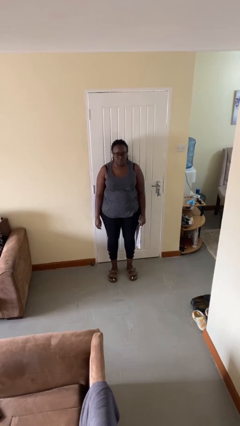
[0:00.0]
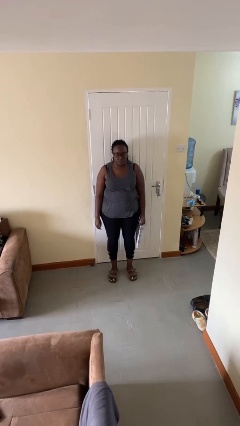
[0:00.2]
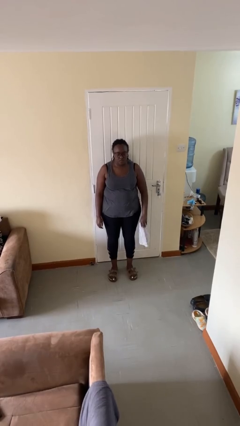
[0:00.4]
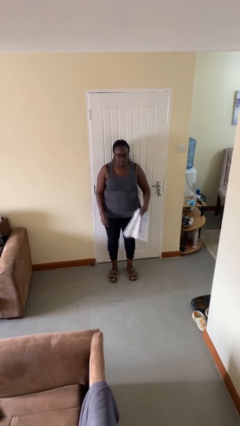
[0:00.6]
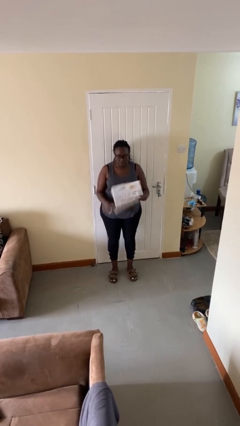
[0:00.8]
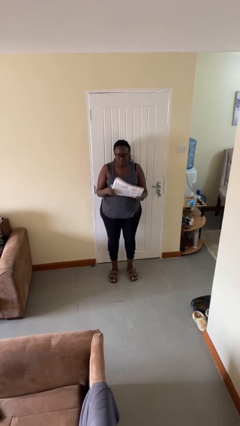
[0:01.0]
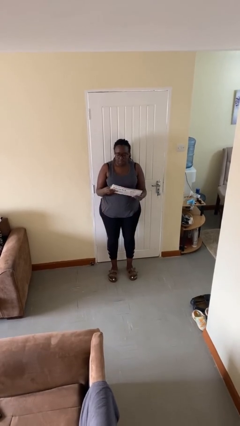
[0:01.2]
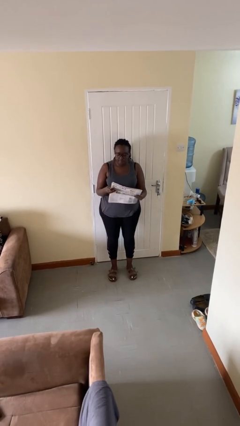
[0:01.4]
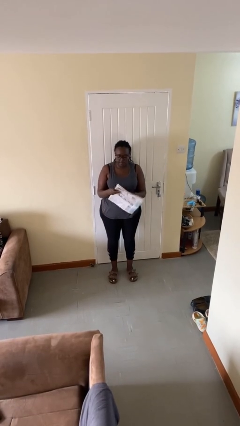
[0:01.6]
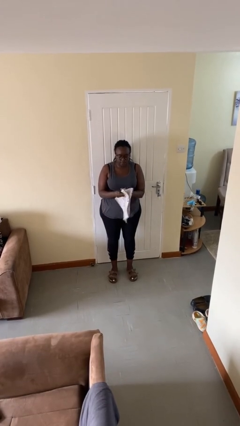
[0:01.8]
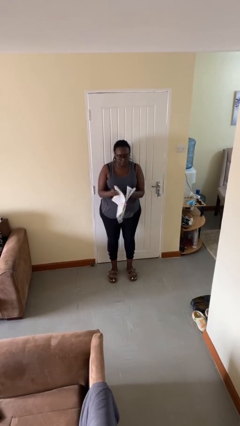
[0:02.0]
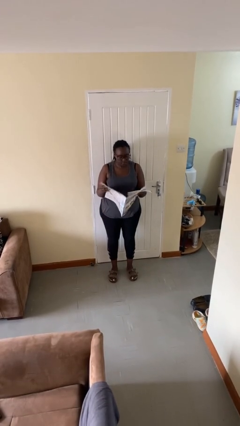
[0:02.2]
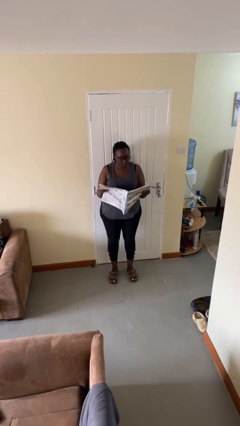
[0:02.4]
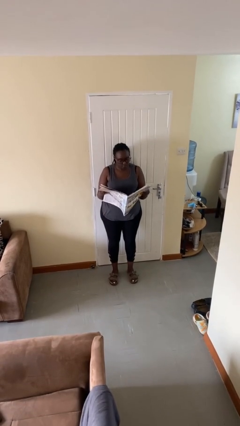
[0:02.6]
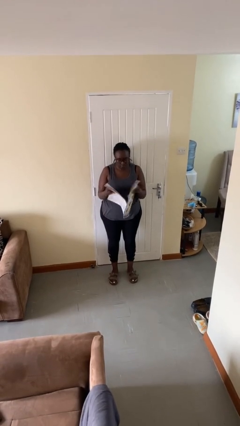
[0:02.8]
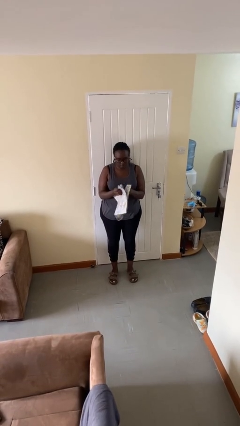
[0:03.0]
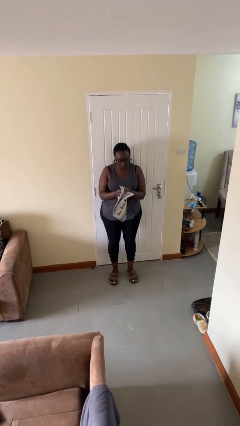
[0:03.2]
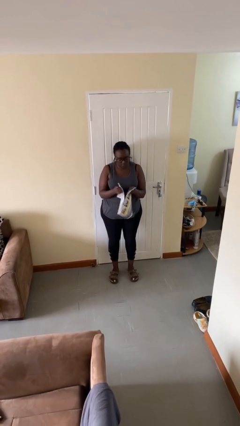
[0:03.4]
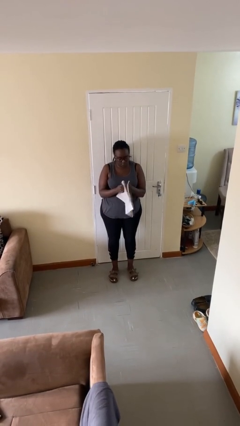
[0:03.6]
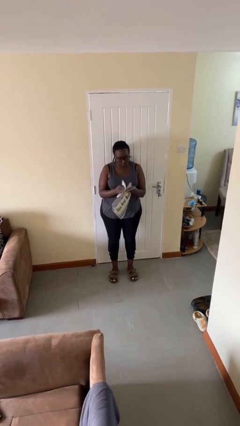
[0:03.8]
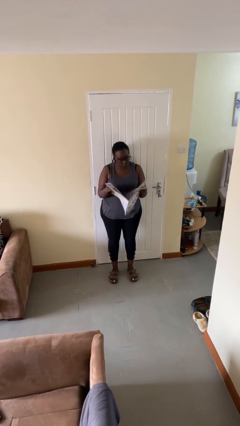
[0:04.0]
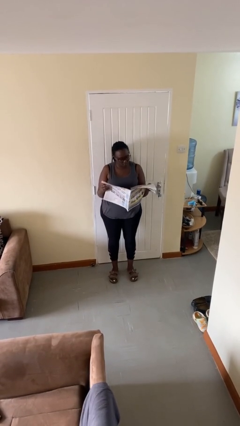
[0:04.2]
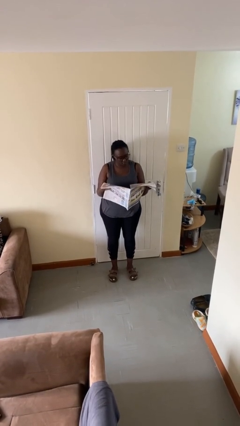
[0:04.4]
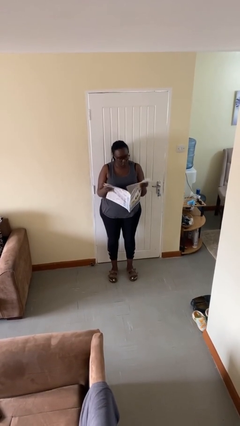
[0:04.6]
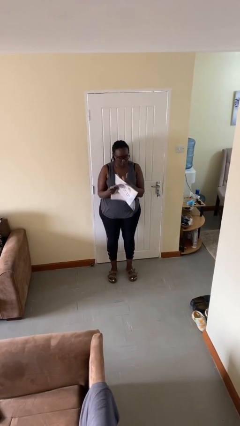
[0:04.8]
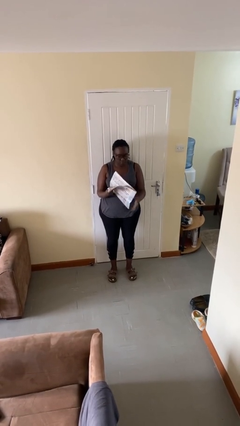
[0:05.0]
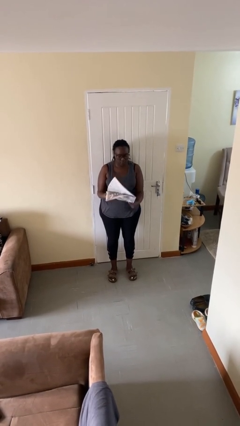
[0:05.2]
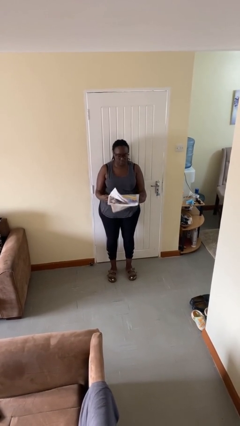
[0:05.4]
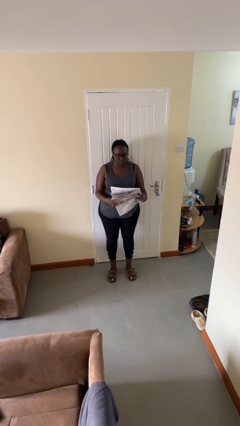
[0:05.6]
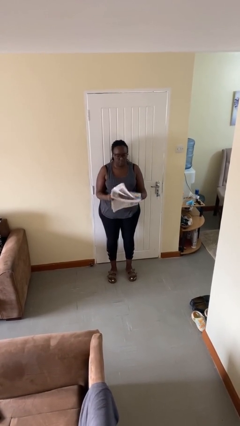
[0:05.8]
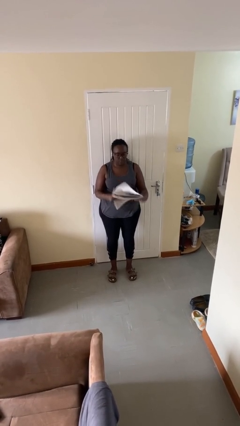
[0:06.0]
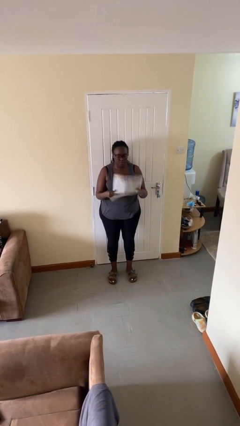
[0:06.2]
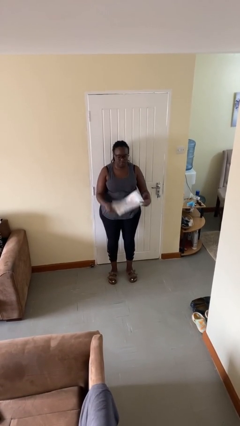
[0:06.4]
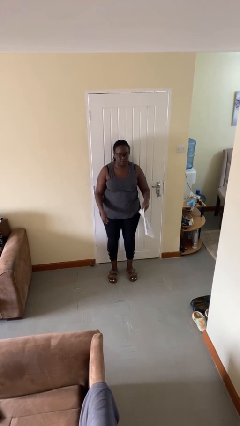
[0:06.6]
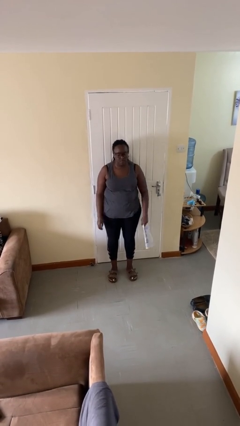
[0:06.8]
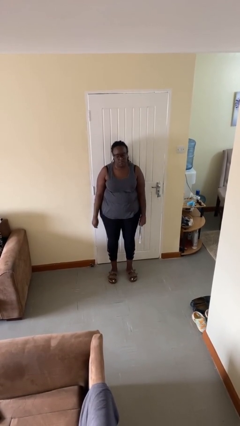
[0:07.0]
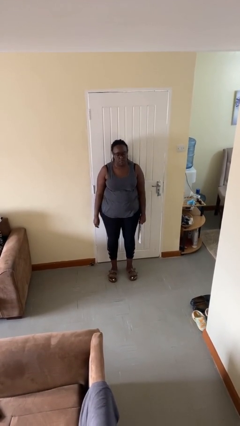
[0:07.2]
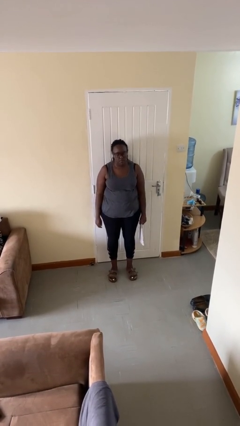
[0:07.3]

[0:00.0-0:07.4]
person reads newspaper

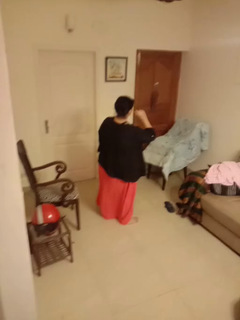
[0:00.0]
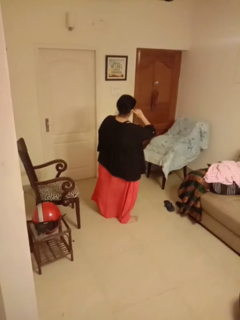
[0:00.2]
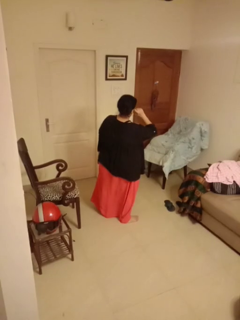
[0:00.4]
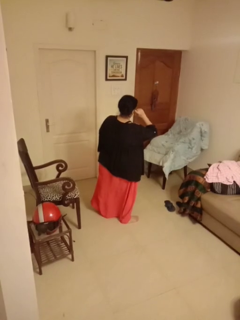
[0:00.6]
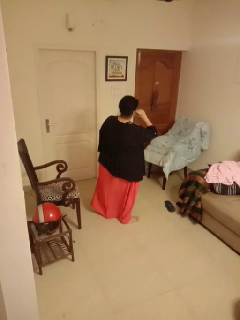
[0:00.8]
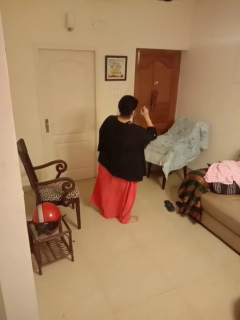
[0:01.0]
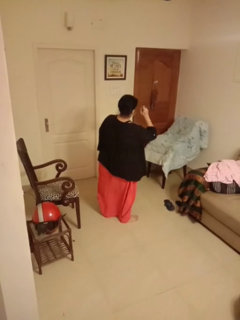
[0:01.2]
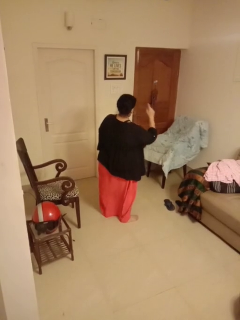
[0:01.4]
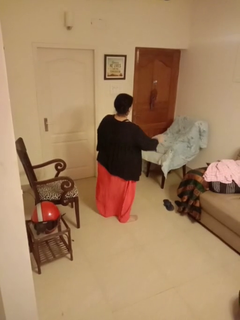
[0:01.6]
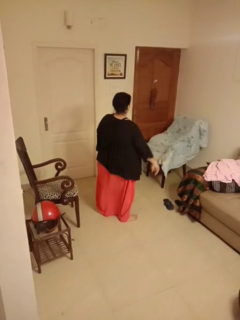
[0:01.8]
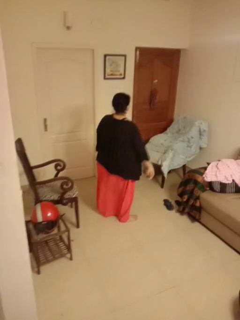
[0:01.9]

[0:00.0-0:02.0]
person gestures listen closely

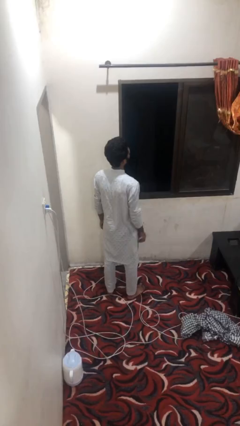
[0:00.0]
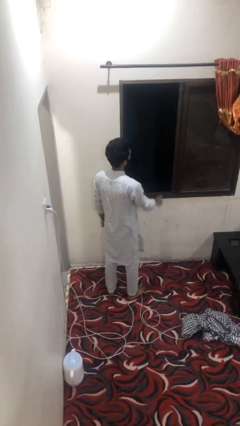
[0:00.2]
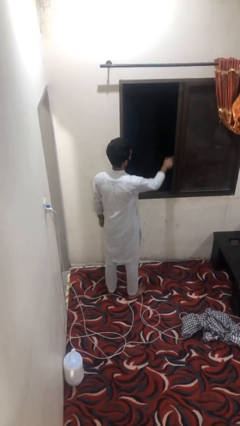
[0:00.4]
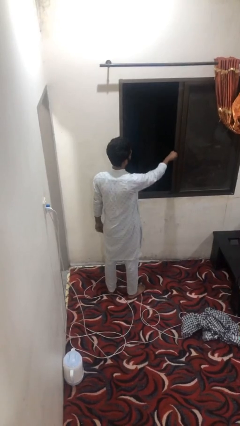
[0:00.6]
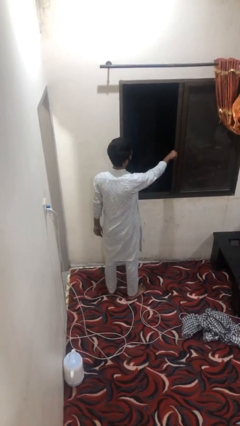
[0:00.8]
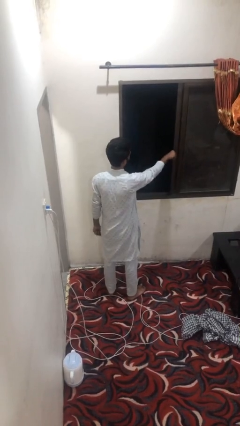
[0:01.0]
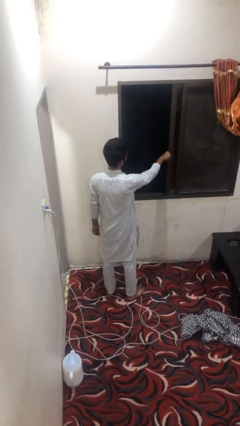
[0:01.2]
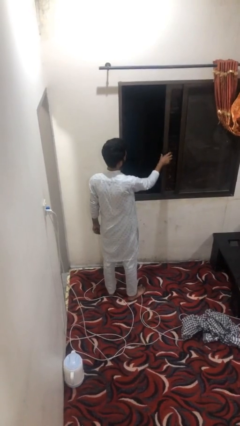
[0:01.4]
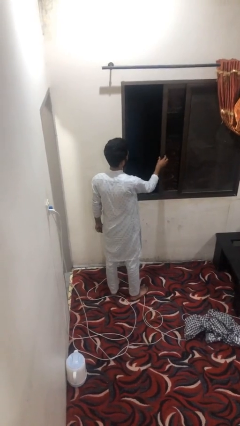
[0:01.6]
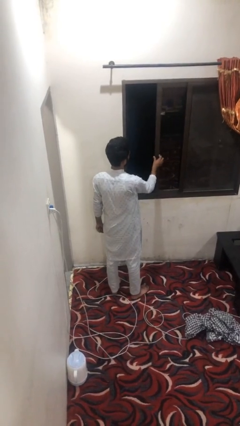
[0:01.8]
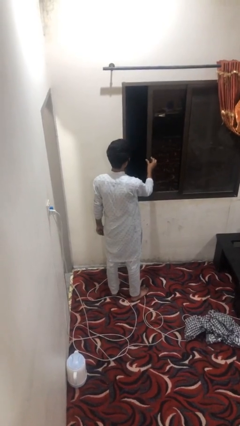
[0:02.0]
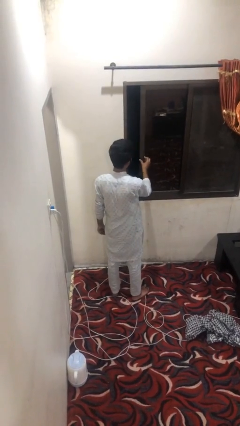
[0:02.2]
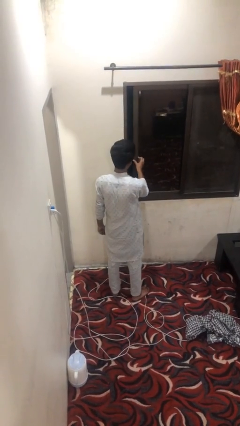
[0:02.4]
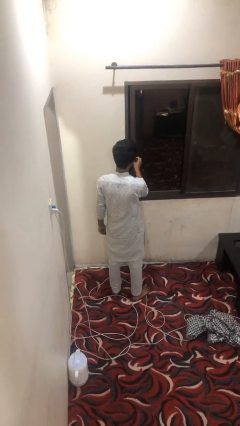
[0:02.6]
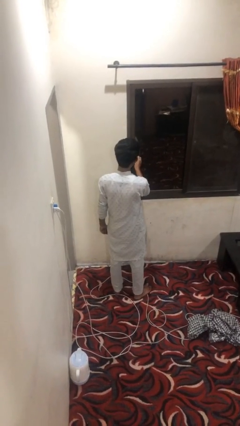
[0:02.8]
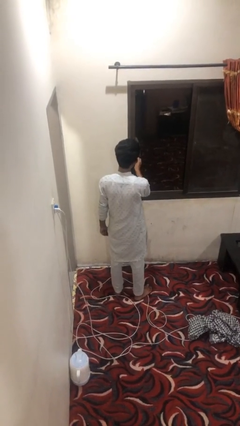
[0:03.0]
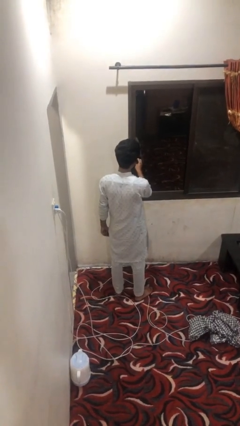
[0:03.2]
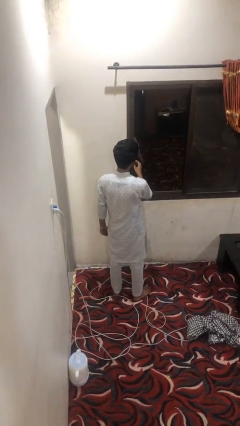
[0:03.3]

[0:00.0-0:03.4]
person closes home window

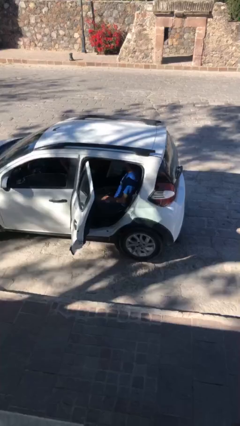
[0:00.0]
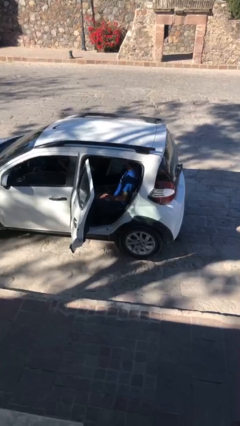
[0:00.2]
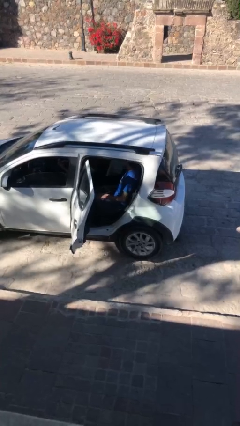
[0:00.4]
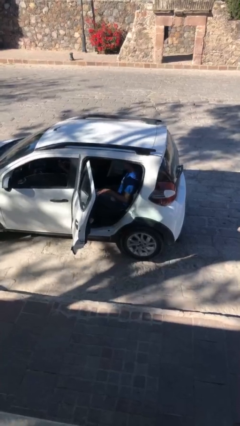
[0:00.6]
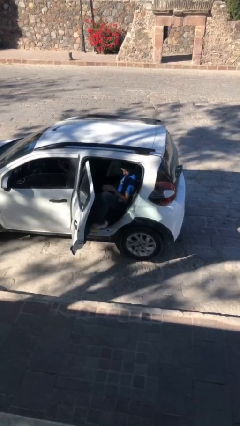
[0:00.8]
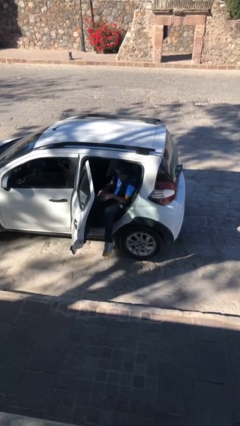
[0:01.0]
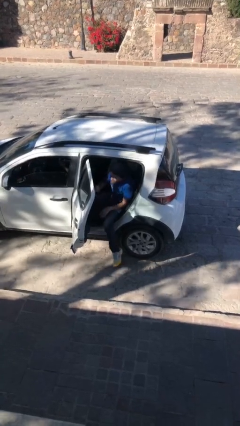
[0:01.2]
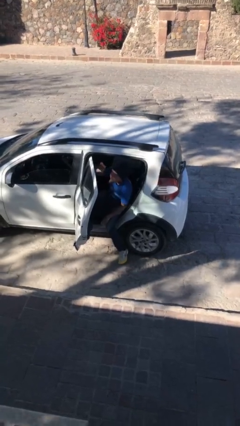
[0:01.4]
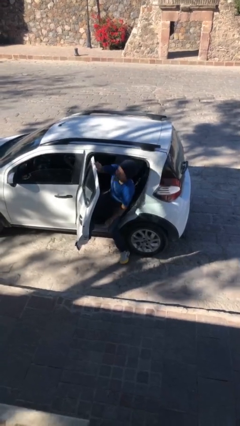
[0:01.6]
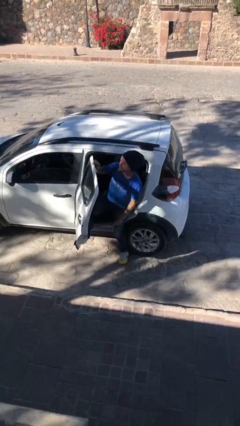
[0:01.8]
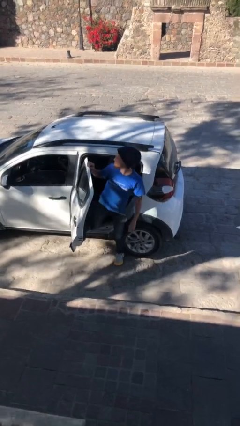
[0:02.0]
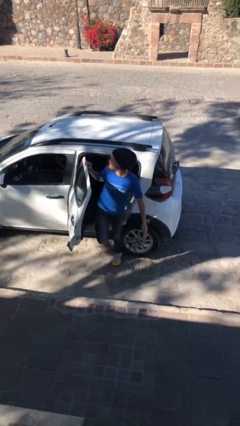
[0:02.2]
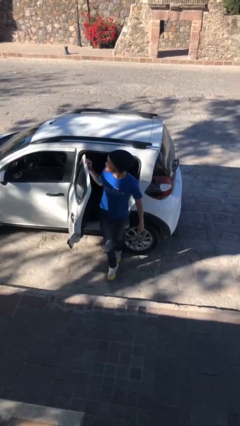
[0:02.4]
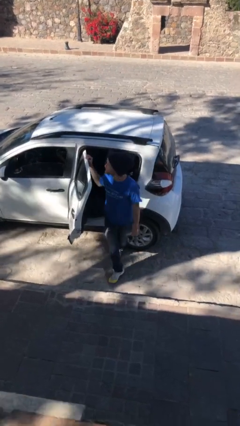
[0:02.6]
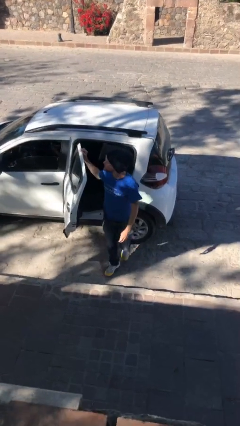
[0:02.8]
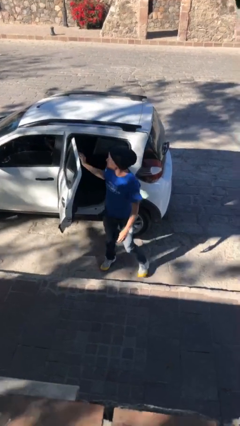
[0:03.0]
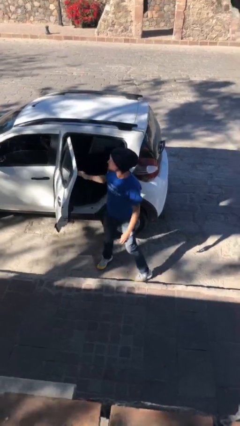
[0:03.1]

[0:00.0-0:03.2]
person exits car

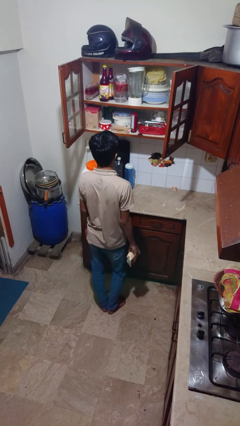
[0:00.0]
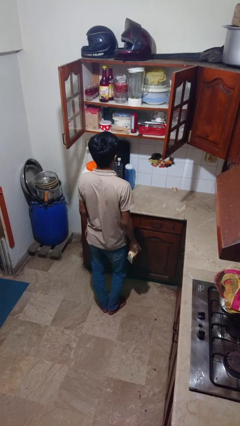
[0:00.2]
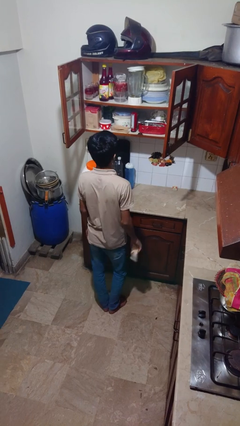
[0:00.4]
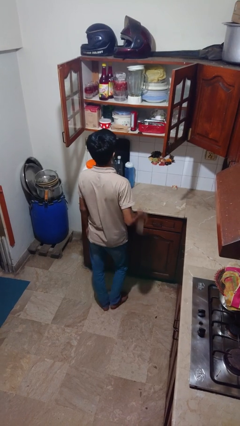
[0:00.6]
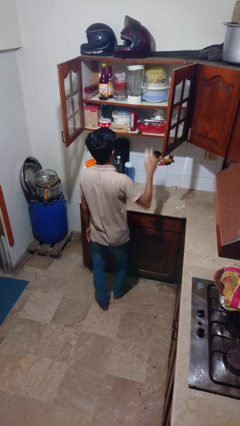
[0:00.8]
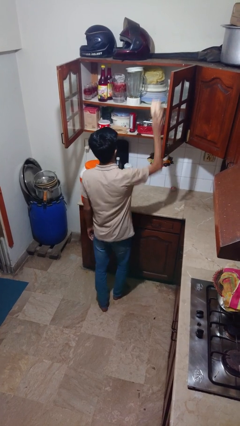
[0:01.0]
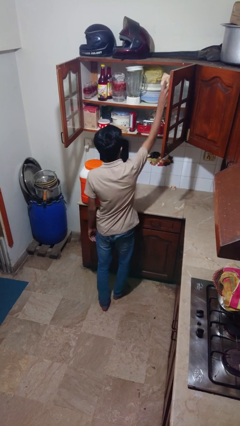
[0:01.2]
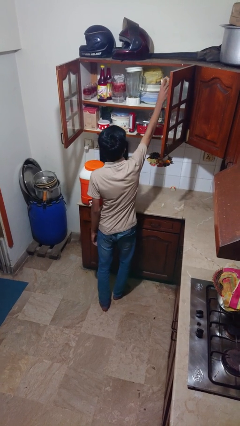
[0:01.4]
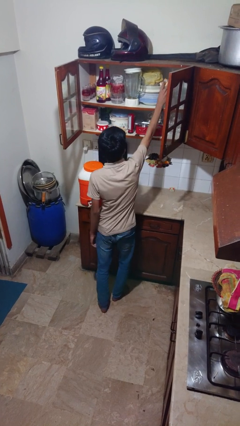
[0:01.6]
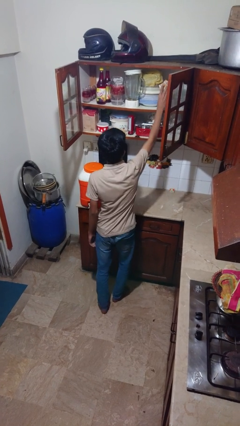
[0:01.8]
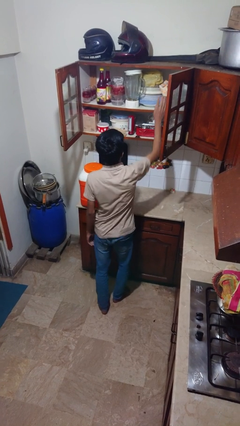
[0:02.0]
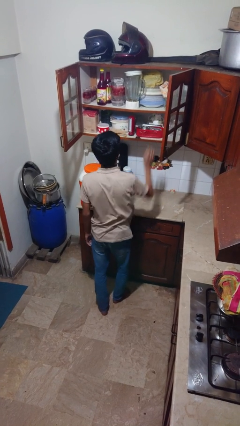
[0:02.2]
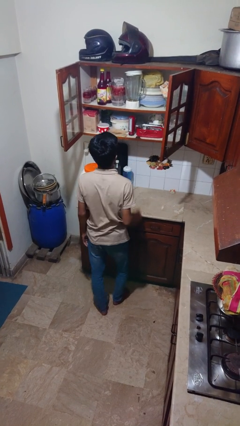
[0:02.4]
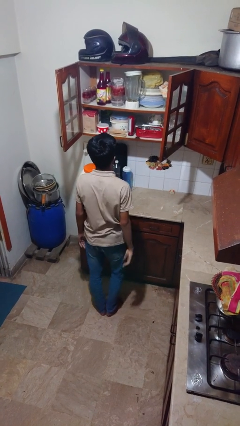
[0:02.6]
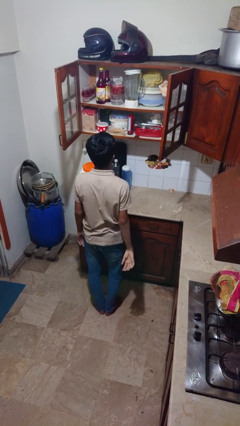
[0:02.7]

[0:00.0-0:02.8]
person puts down object into cabinet
